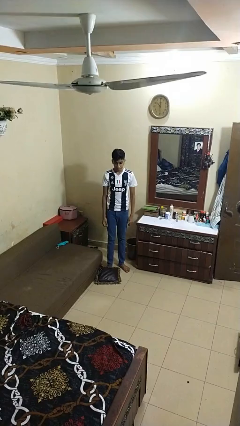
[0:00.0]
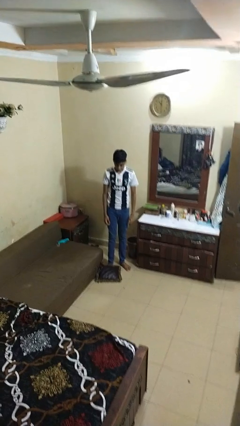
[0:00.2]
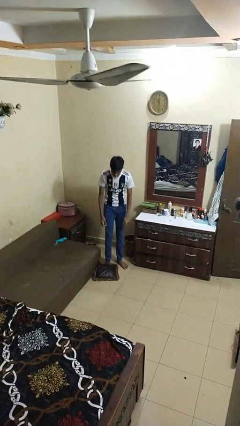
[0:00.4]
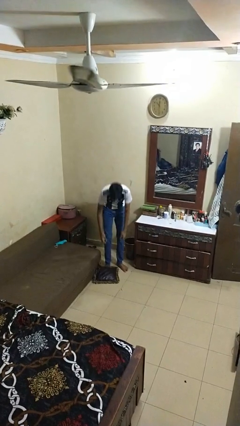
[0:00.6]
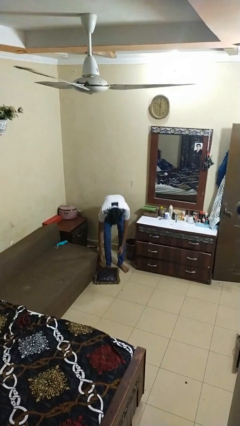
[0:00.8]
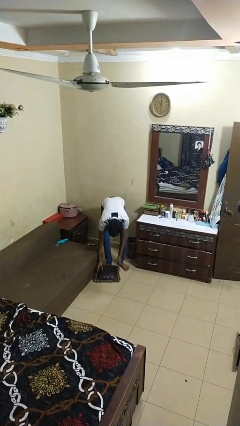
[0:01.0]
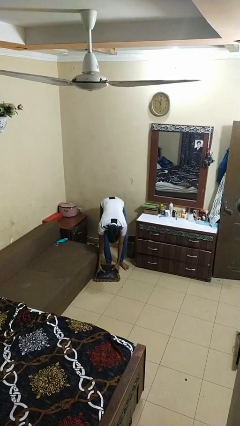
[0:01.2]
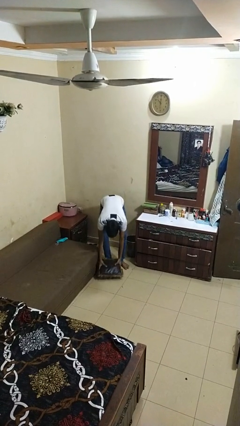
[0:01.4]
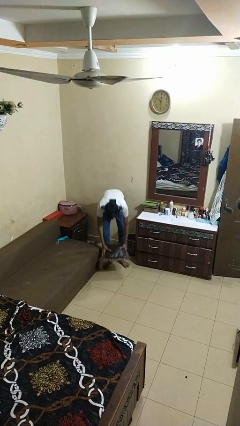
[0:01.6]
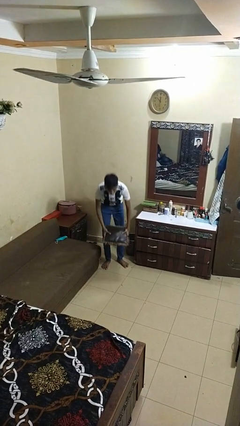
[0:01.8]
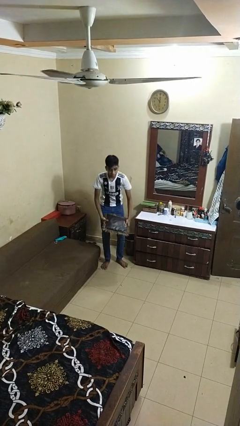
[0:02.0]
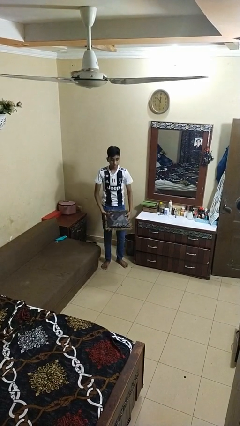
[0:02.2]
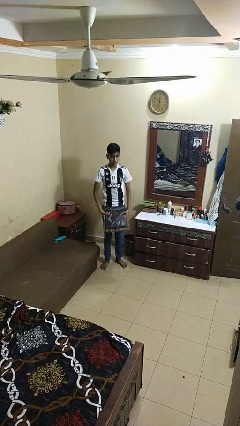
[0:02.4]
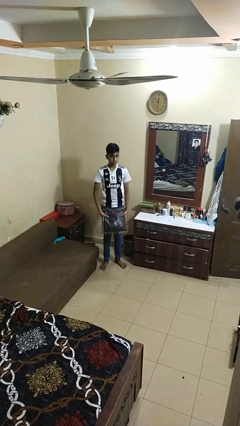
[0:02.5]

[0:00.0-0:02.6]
person picks up object from floor

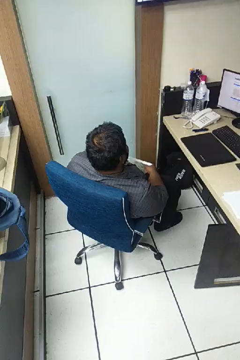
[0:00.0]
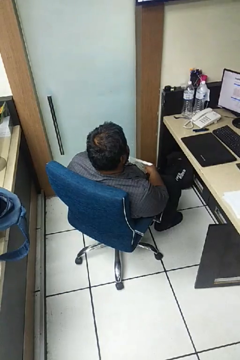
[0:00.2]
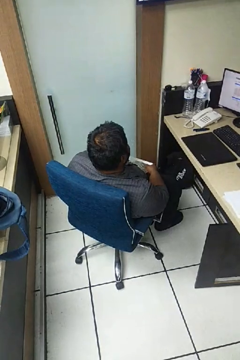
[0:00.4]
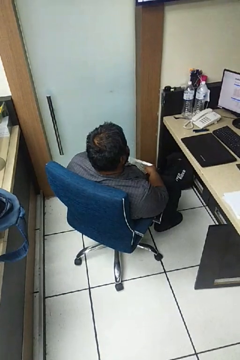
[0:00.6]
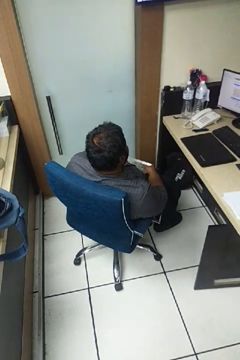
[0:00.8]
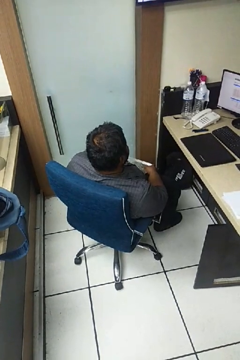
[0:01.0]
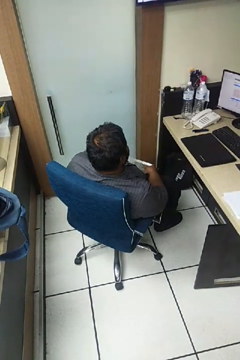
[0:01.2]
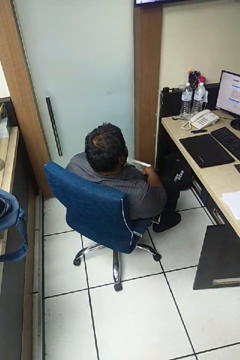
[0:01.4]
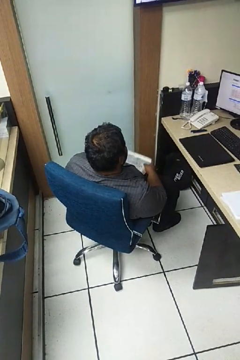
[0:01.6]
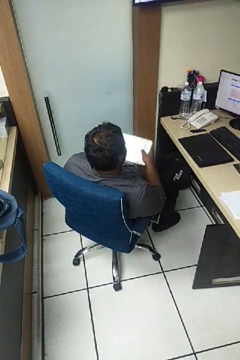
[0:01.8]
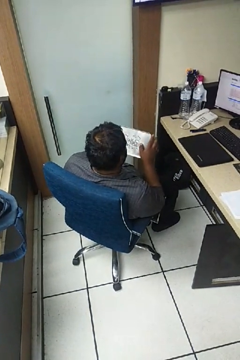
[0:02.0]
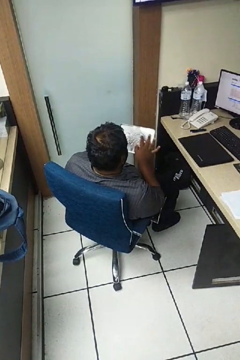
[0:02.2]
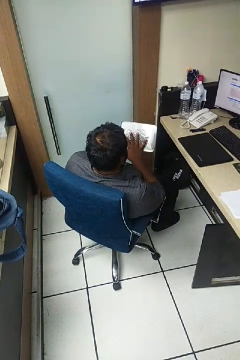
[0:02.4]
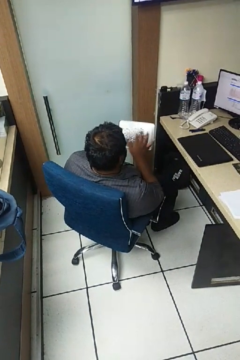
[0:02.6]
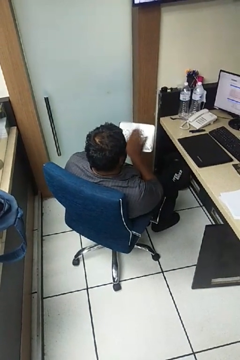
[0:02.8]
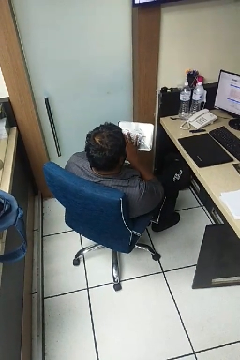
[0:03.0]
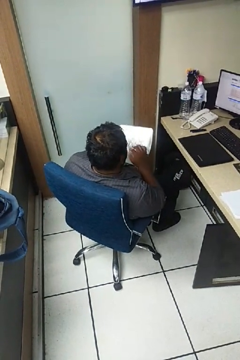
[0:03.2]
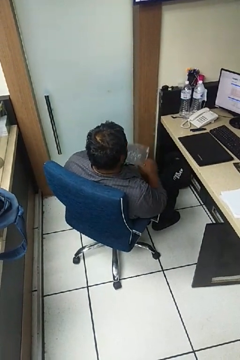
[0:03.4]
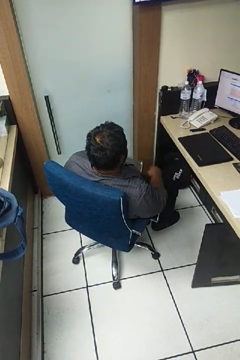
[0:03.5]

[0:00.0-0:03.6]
person interacts with tablet

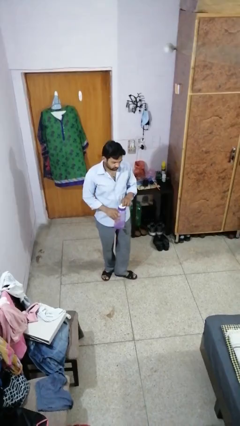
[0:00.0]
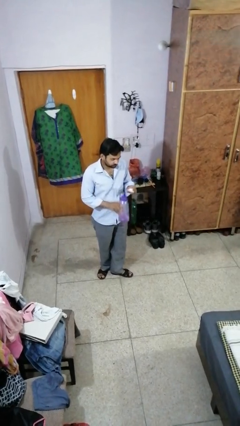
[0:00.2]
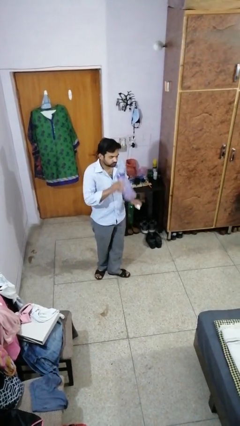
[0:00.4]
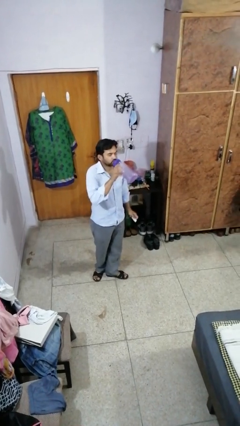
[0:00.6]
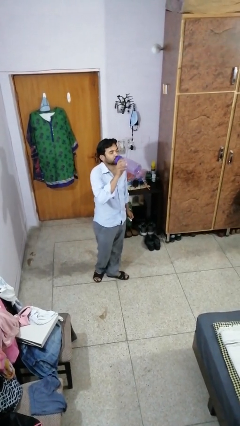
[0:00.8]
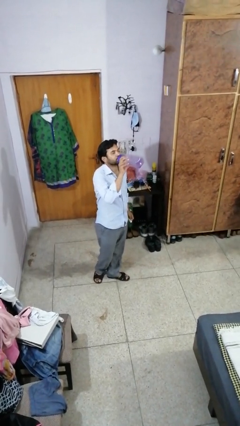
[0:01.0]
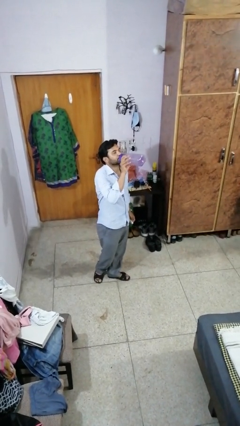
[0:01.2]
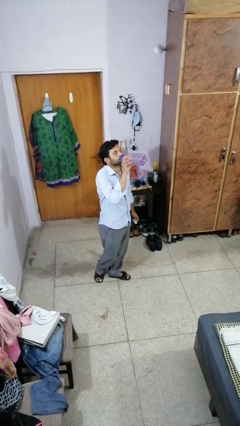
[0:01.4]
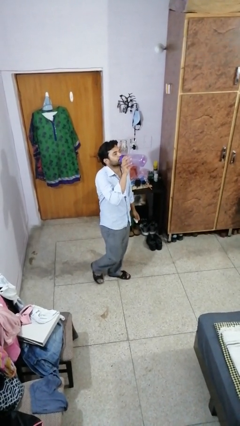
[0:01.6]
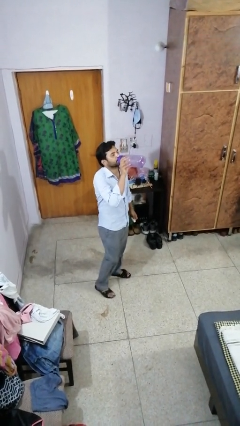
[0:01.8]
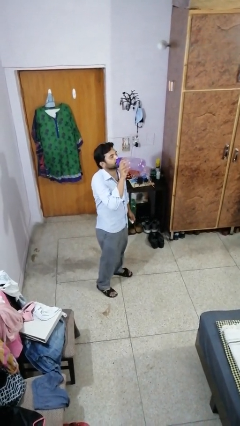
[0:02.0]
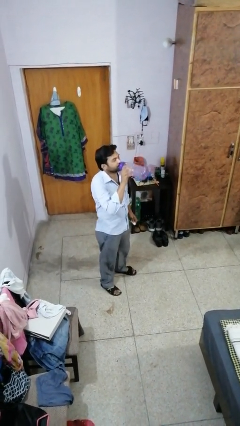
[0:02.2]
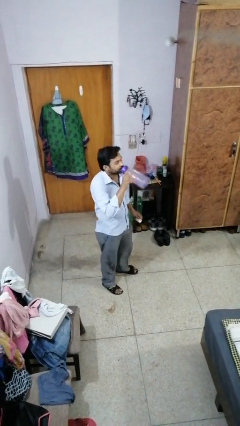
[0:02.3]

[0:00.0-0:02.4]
person drinks from bottle

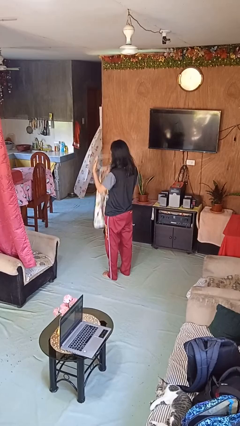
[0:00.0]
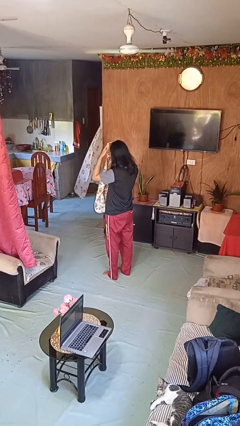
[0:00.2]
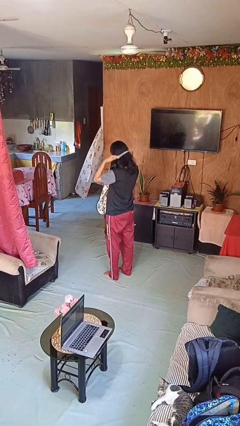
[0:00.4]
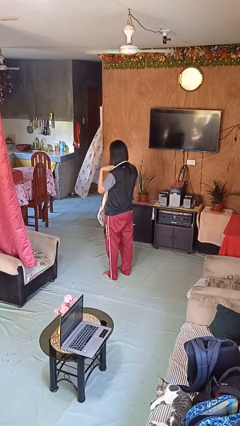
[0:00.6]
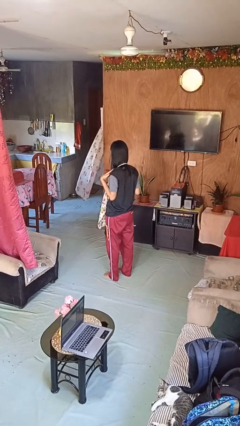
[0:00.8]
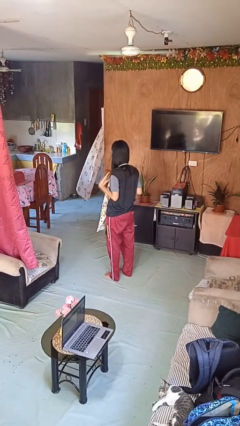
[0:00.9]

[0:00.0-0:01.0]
person puts on apron

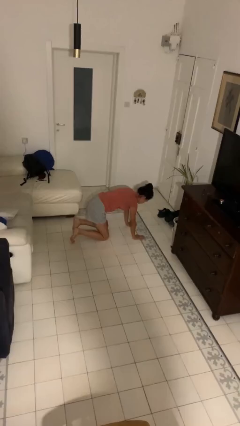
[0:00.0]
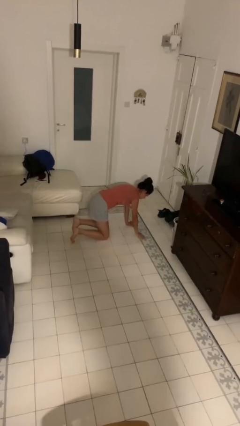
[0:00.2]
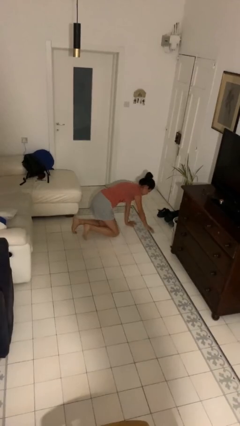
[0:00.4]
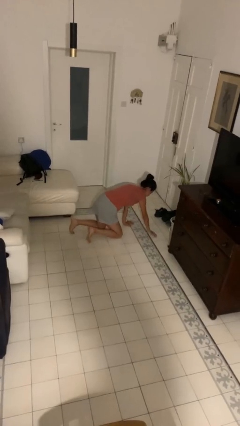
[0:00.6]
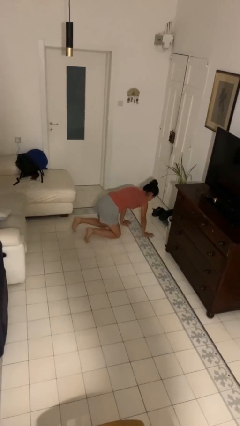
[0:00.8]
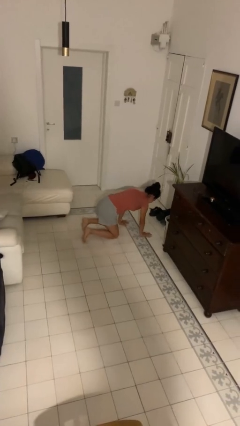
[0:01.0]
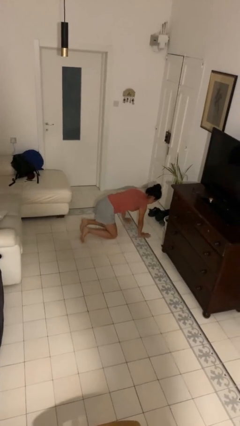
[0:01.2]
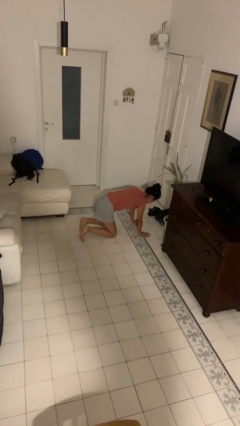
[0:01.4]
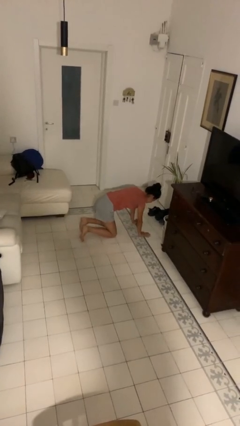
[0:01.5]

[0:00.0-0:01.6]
person crawls

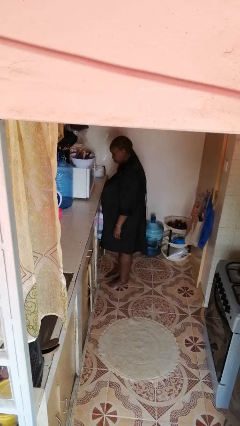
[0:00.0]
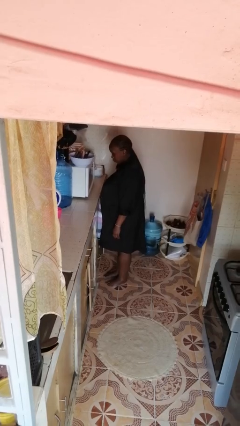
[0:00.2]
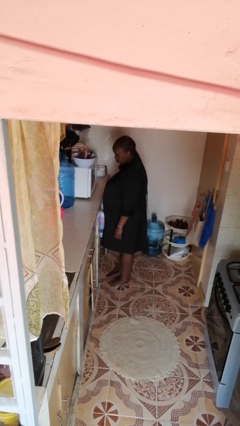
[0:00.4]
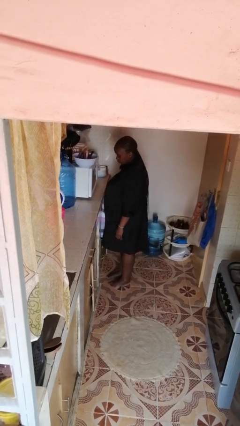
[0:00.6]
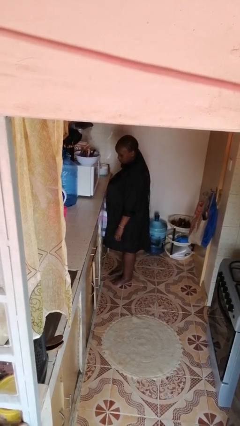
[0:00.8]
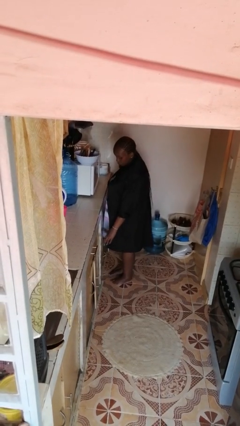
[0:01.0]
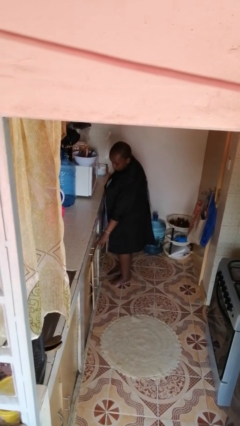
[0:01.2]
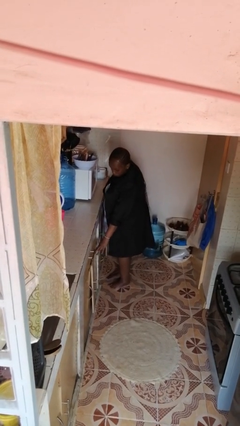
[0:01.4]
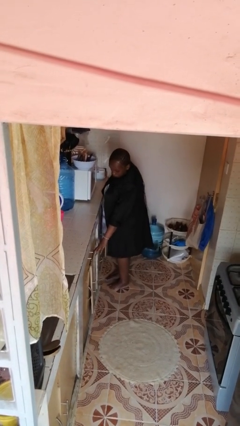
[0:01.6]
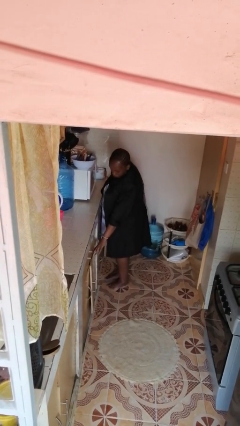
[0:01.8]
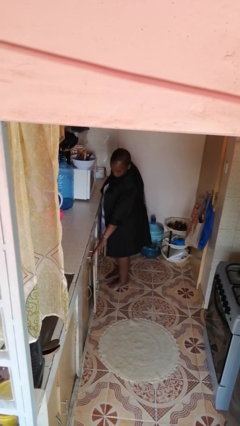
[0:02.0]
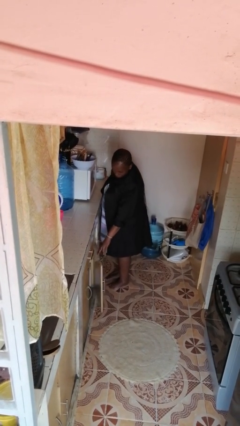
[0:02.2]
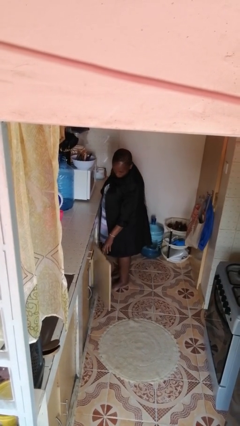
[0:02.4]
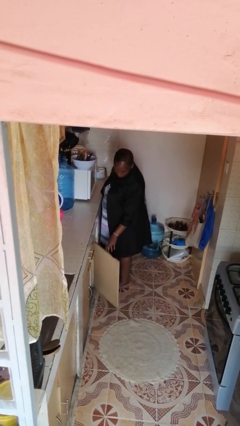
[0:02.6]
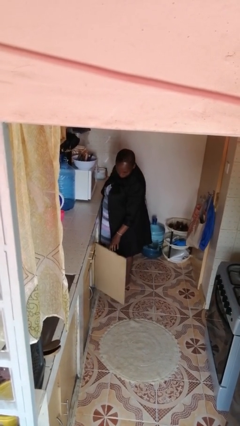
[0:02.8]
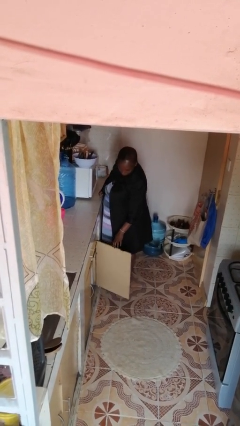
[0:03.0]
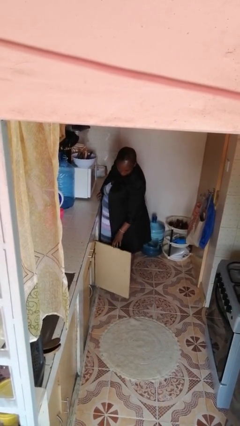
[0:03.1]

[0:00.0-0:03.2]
person opens cabinet

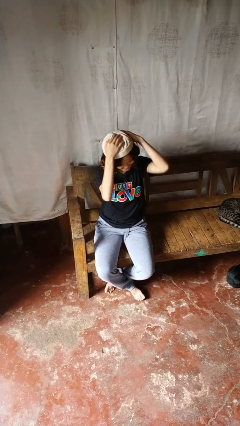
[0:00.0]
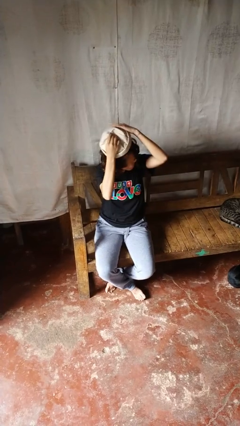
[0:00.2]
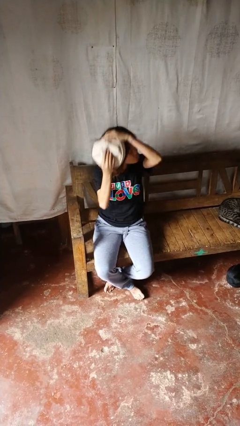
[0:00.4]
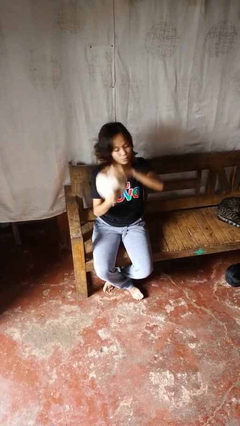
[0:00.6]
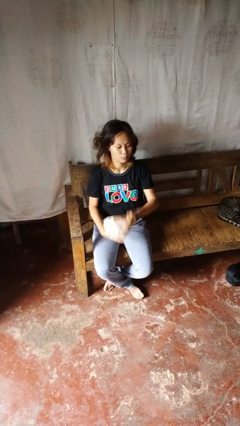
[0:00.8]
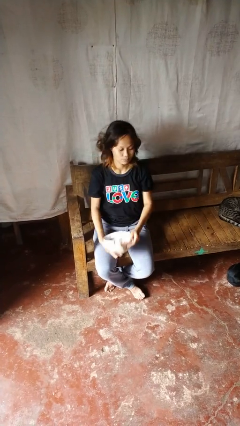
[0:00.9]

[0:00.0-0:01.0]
person takes off hat

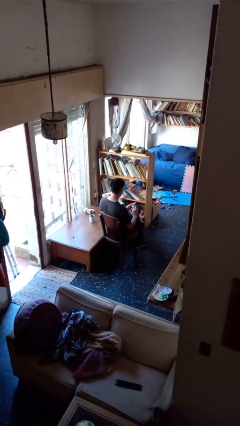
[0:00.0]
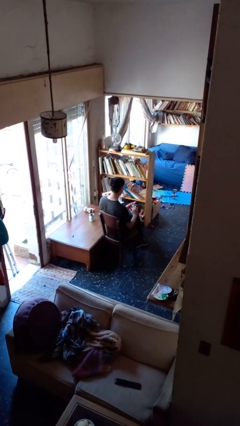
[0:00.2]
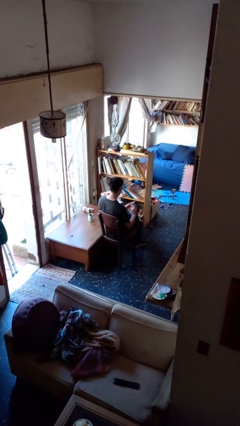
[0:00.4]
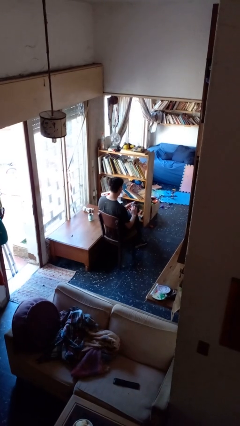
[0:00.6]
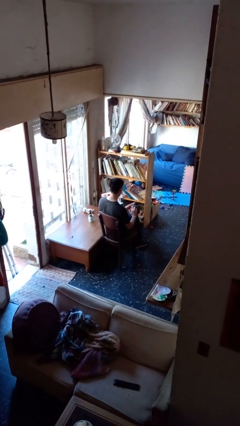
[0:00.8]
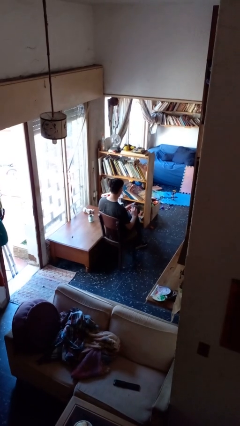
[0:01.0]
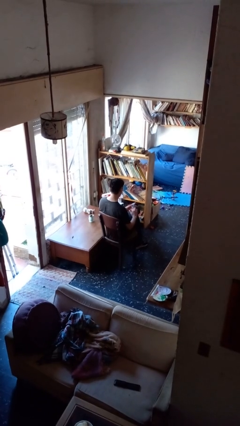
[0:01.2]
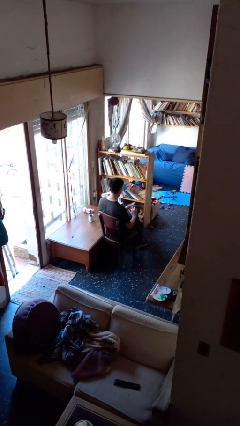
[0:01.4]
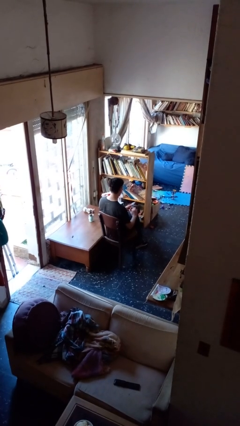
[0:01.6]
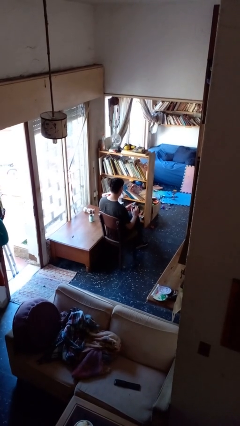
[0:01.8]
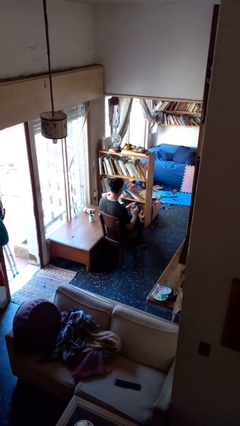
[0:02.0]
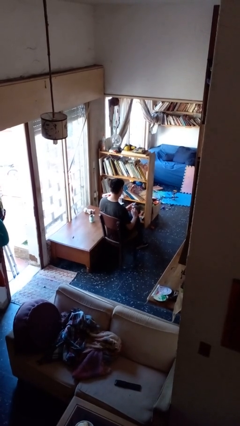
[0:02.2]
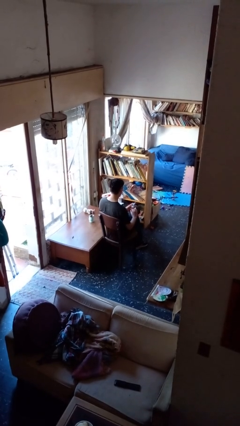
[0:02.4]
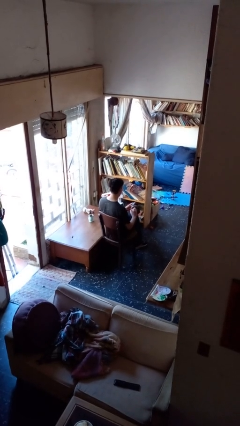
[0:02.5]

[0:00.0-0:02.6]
person clips fingernails
